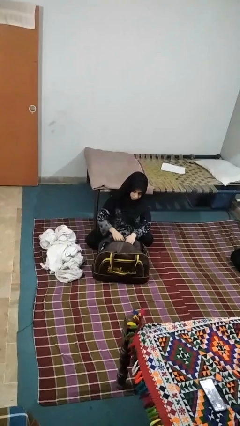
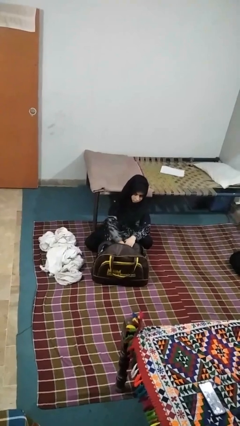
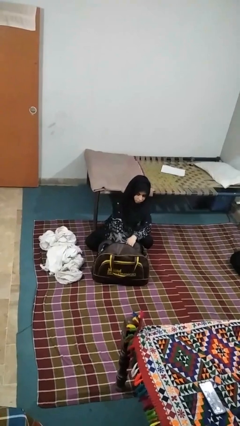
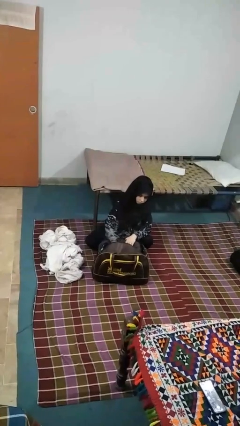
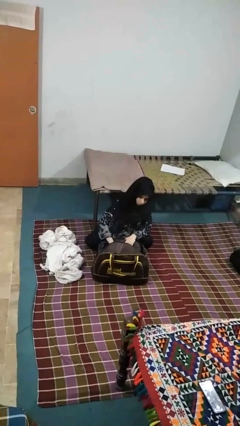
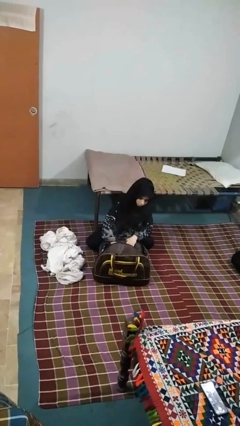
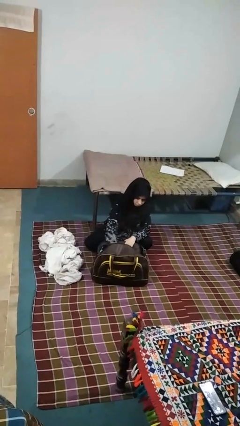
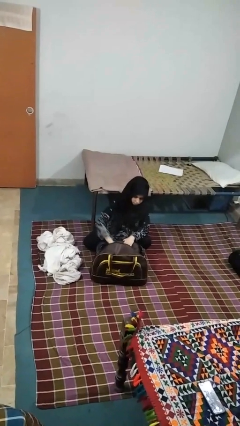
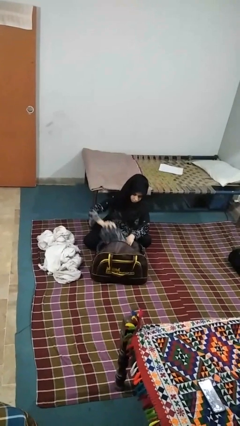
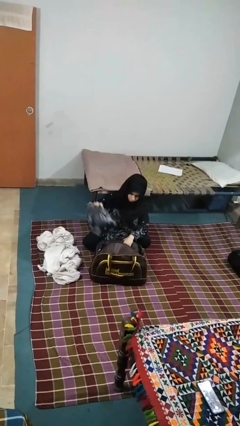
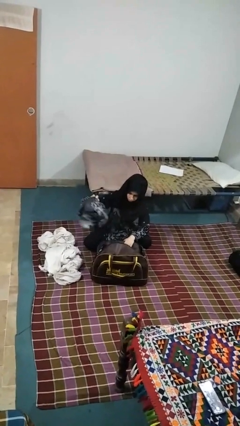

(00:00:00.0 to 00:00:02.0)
person unloads clothes from suitcase

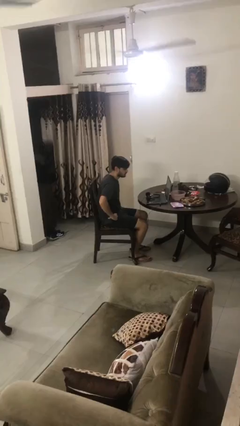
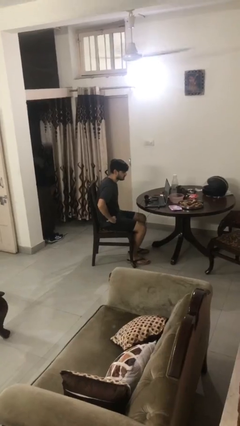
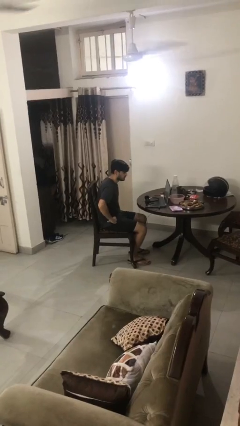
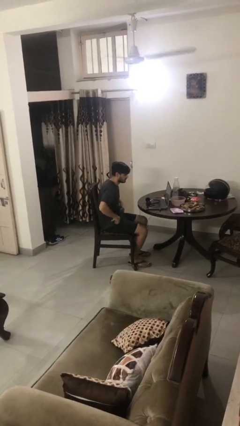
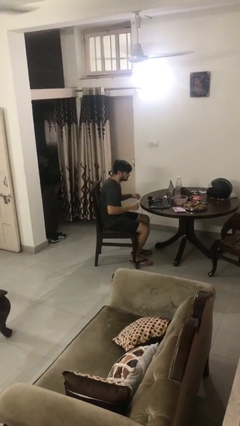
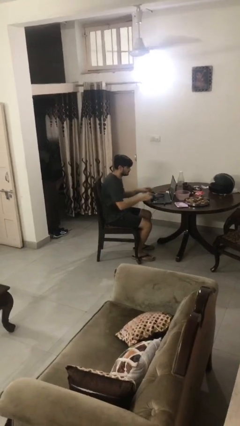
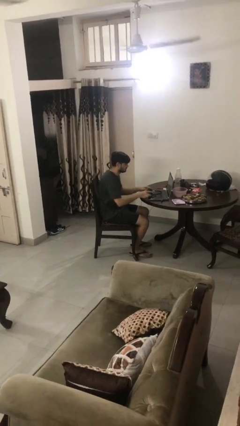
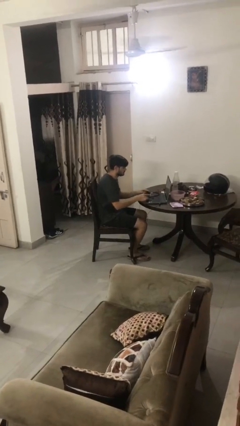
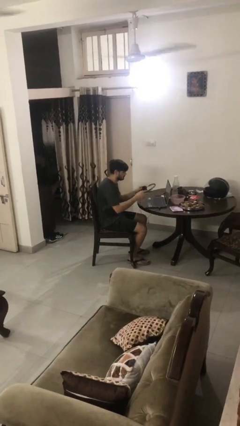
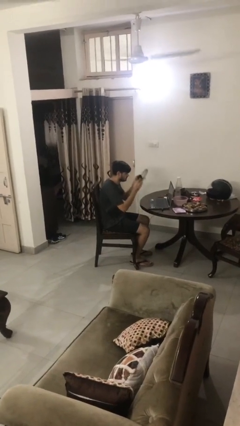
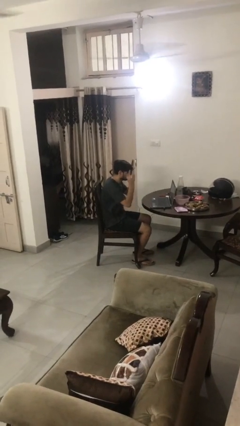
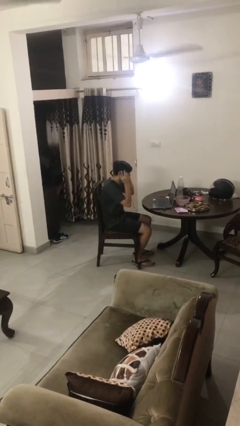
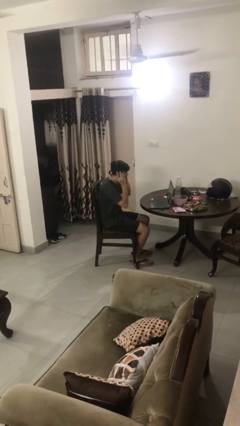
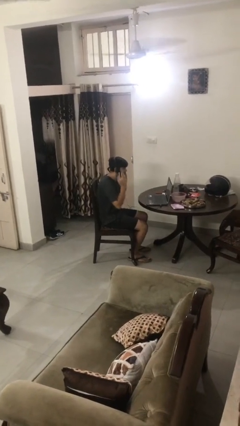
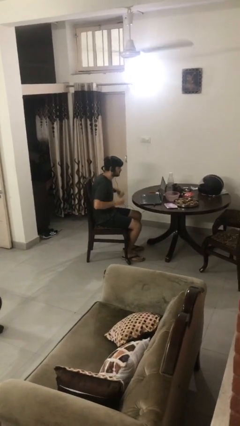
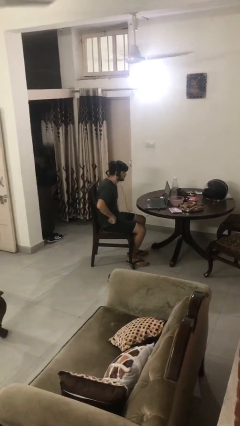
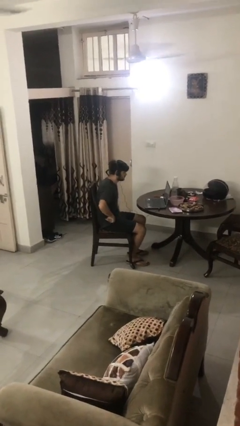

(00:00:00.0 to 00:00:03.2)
person puts on headphones

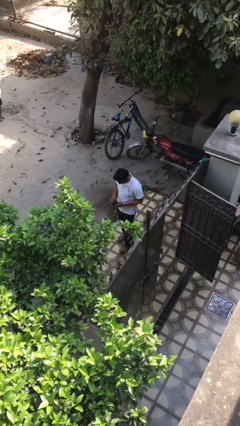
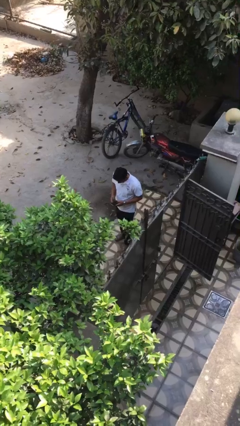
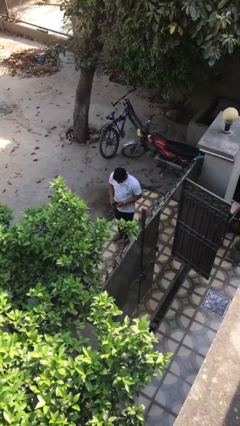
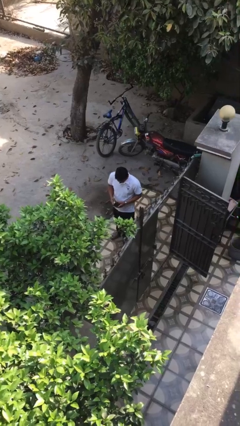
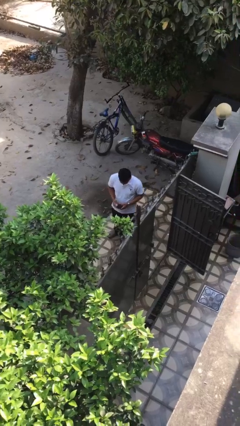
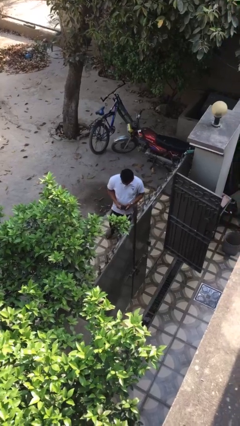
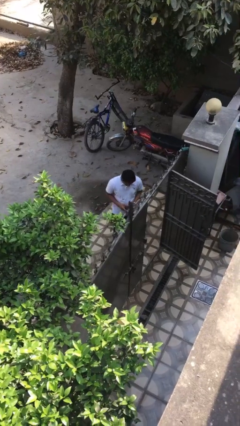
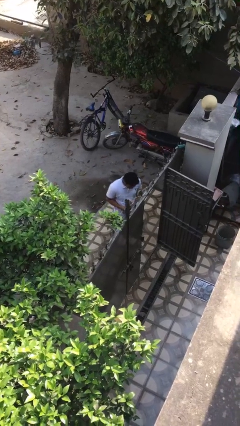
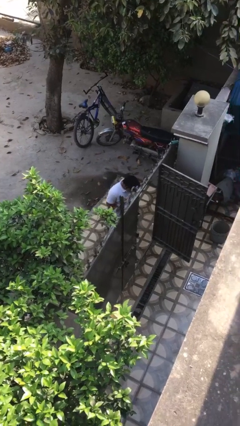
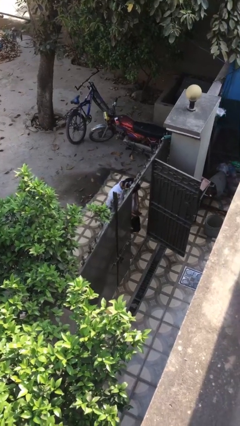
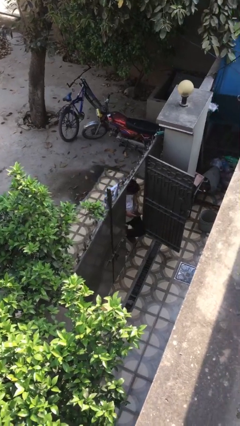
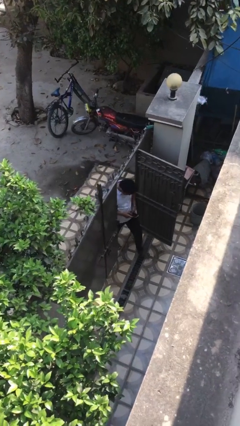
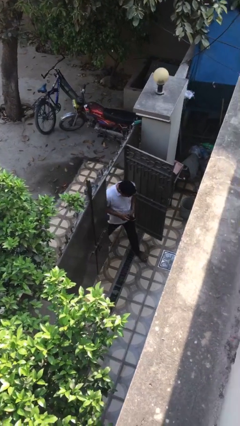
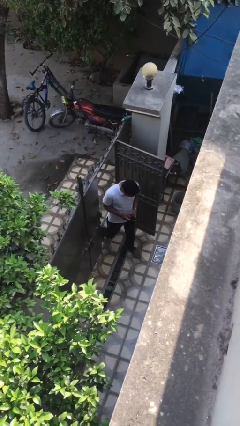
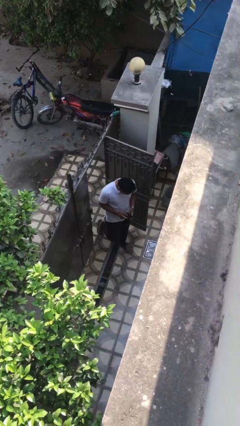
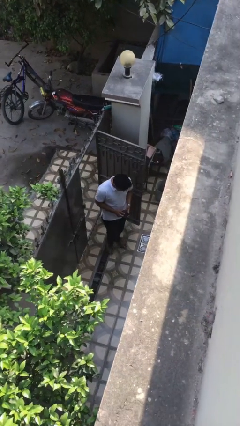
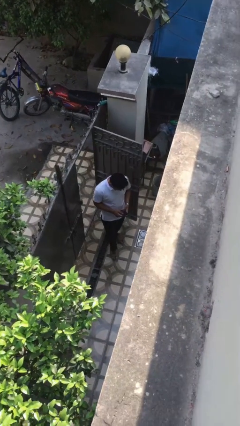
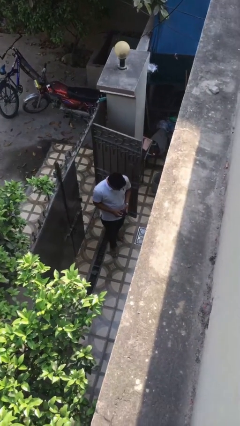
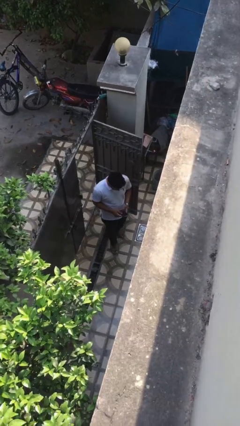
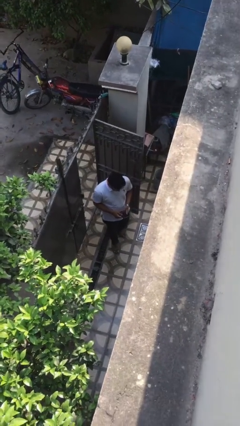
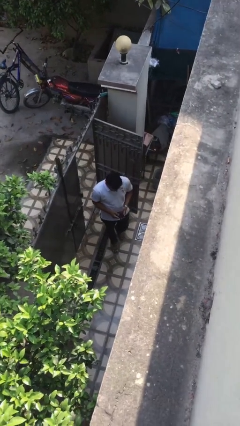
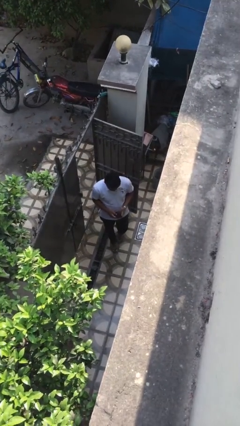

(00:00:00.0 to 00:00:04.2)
person enters scene through structure

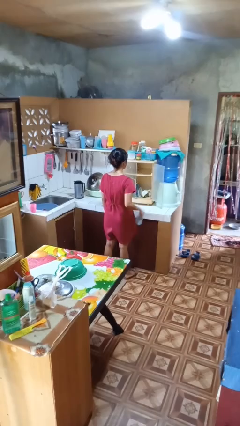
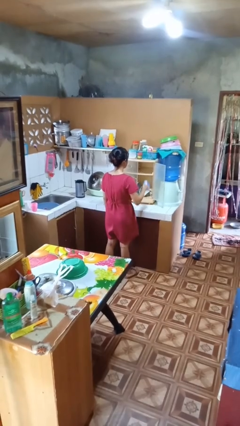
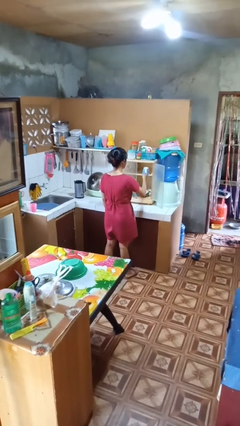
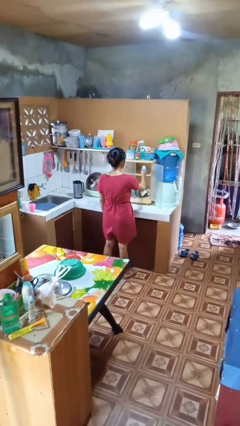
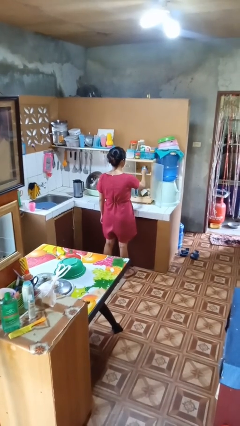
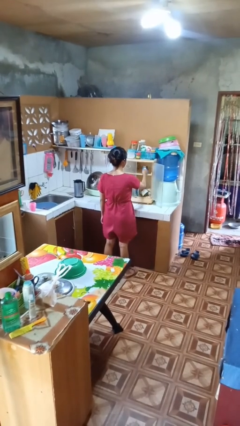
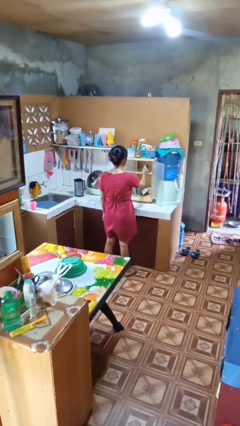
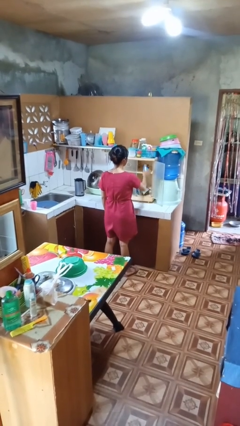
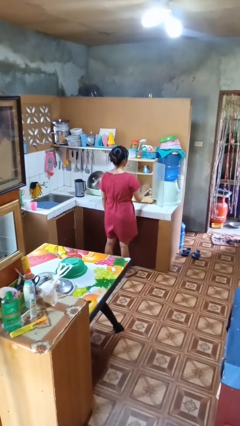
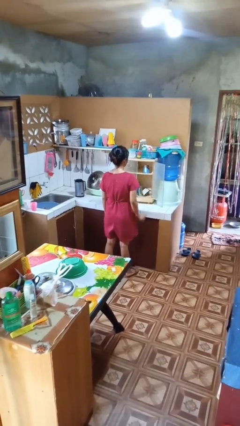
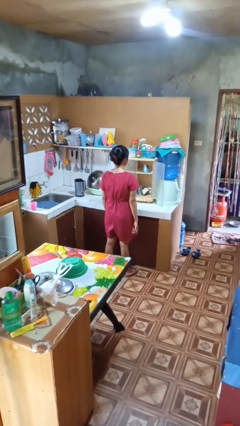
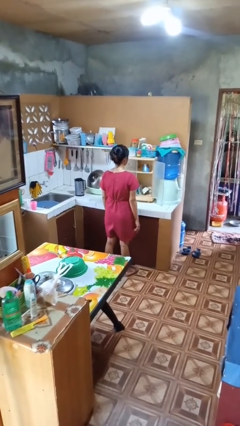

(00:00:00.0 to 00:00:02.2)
person puts object in cabinet

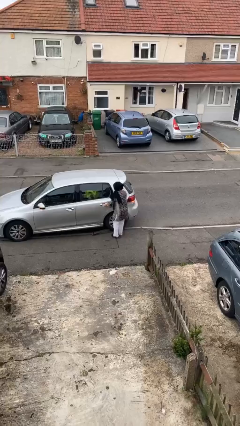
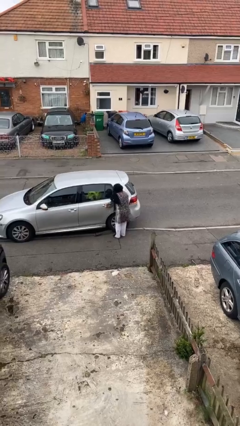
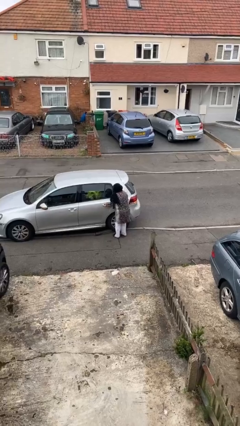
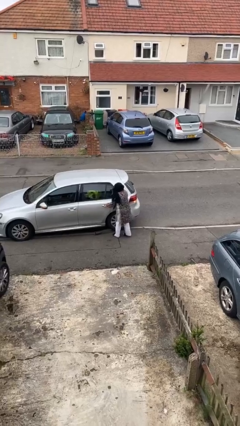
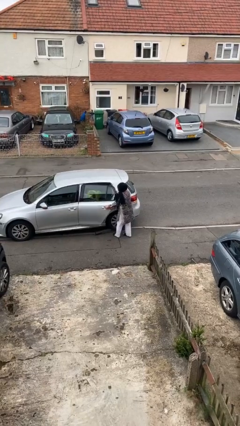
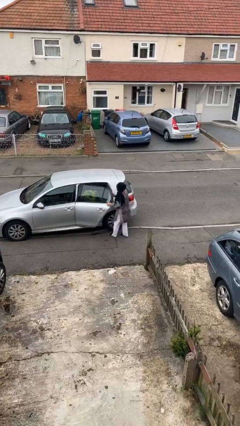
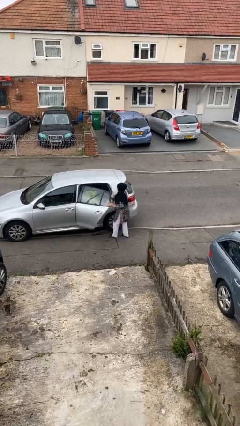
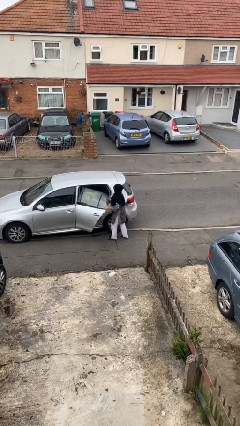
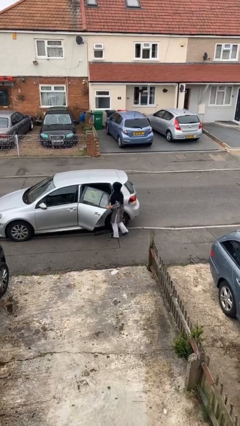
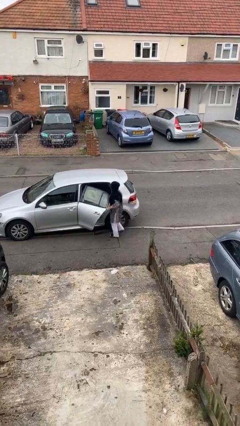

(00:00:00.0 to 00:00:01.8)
person opens car door

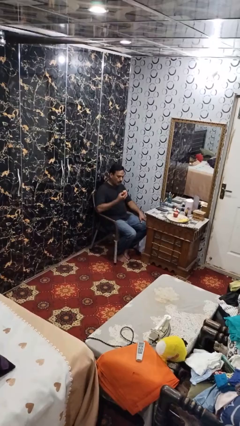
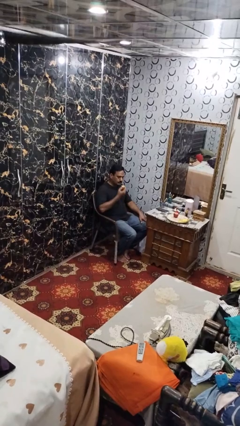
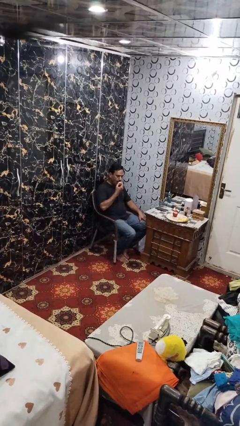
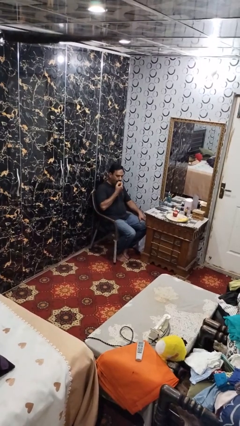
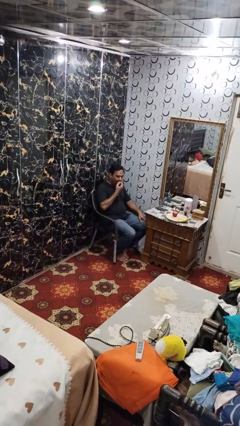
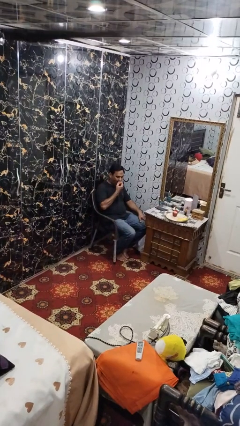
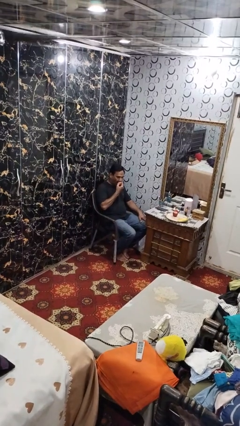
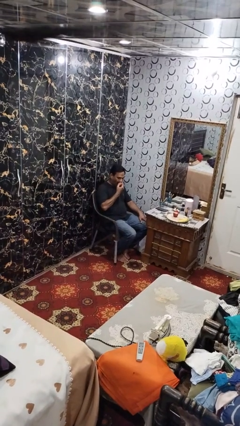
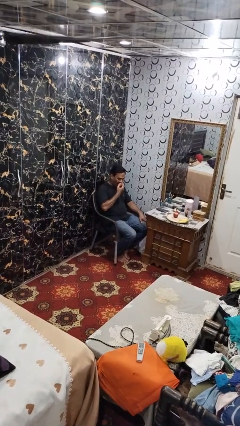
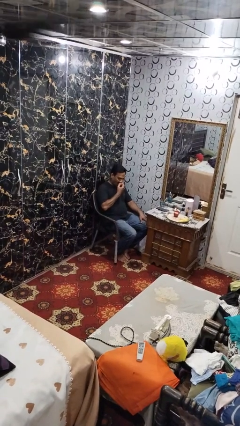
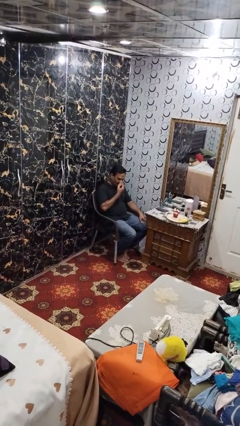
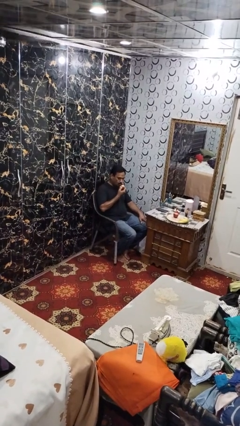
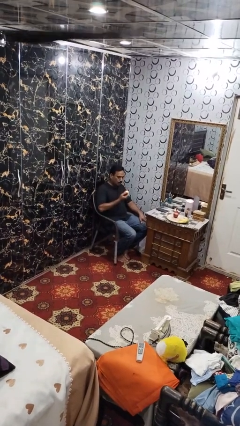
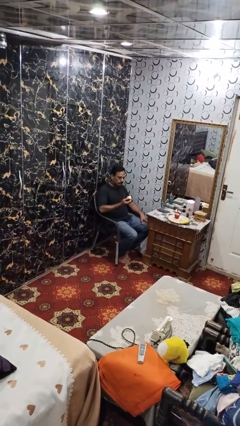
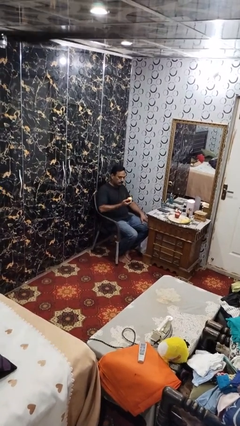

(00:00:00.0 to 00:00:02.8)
person eats apple

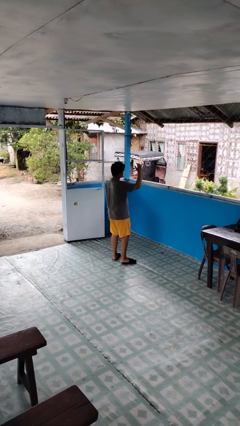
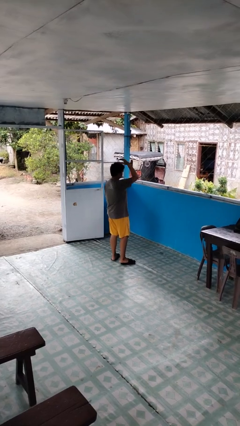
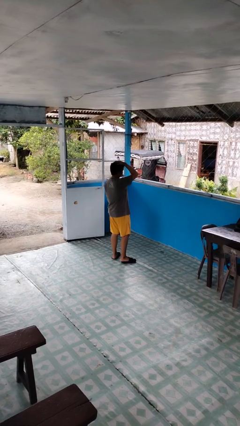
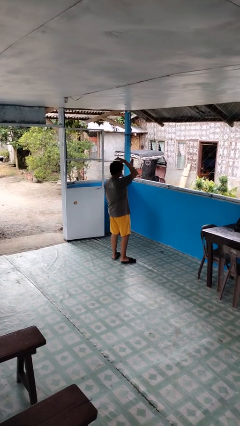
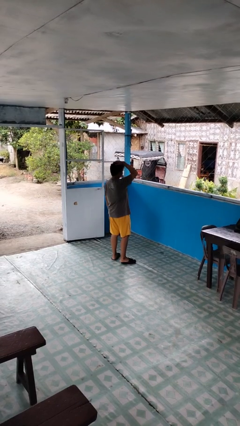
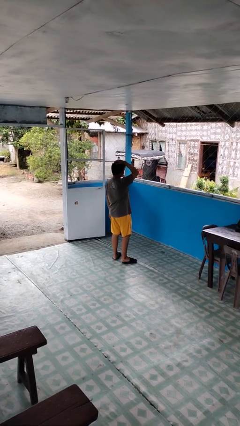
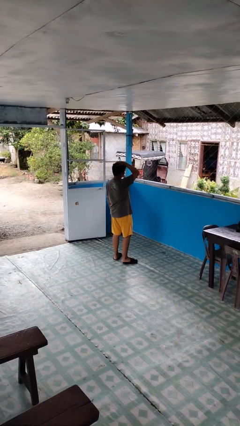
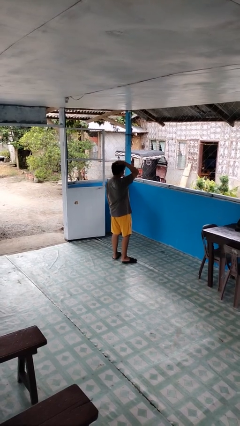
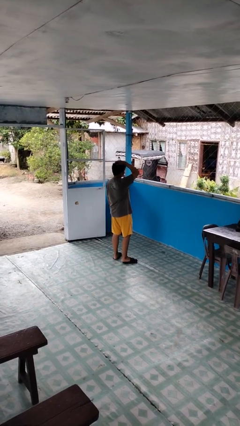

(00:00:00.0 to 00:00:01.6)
person pats head
